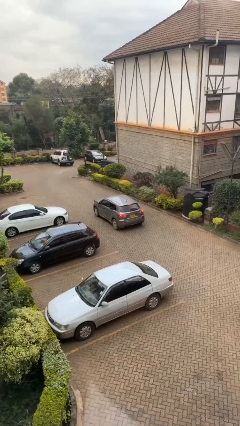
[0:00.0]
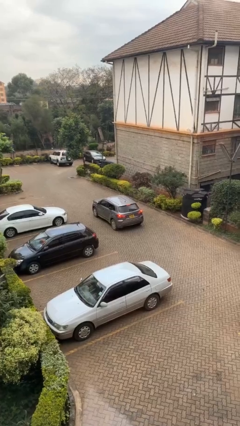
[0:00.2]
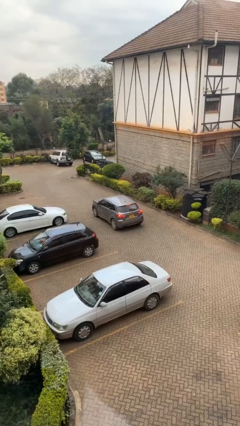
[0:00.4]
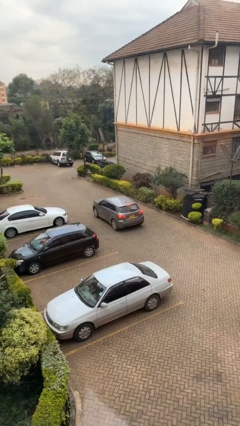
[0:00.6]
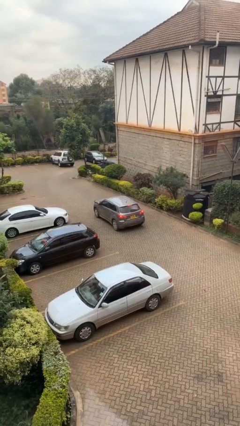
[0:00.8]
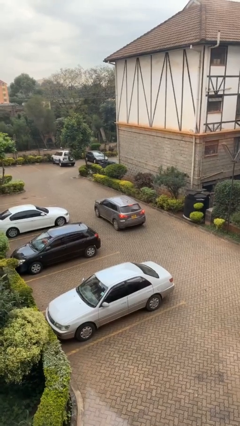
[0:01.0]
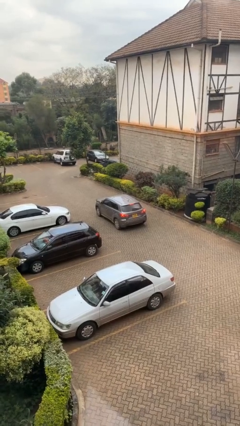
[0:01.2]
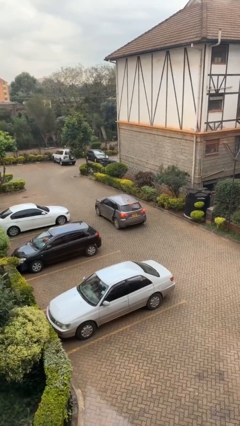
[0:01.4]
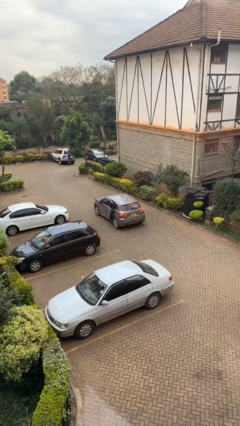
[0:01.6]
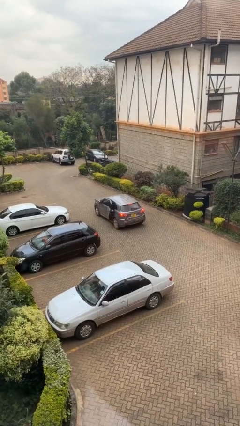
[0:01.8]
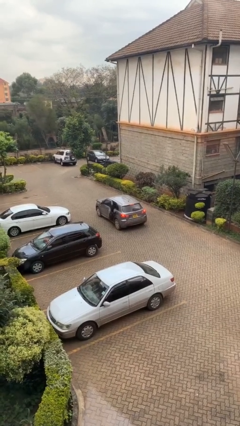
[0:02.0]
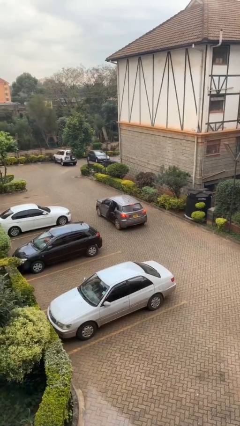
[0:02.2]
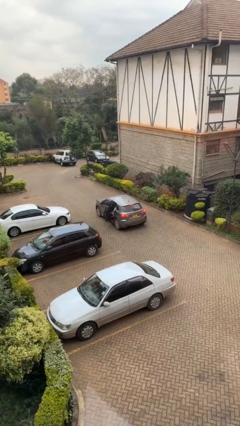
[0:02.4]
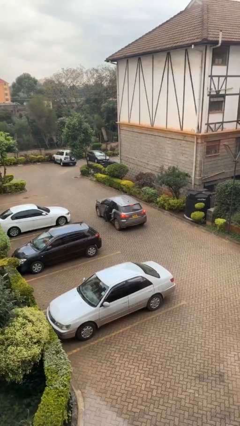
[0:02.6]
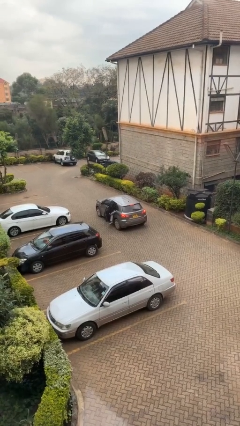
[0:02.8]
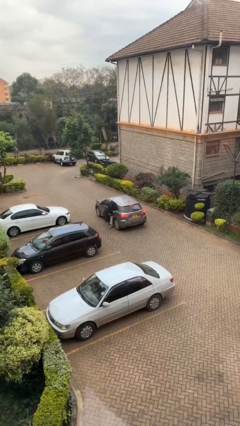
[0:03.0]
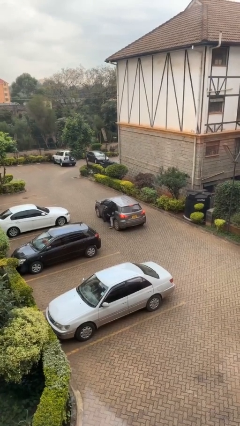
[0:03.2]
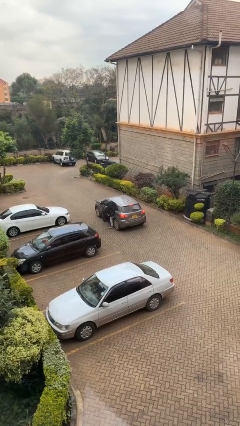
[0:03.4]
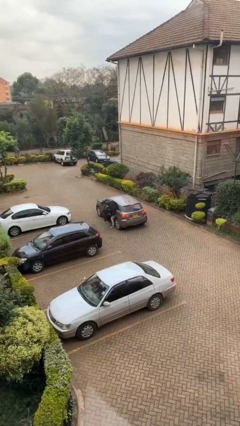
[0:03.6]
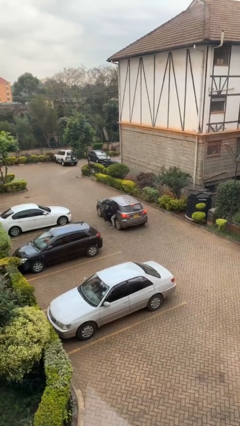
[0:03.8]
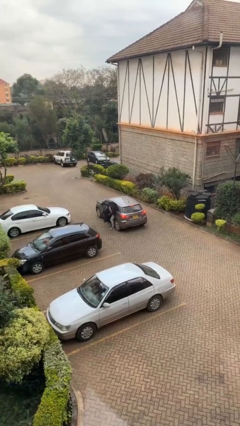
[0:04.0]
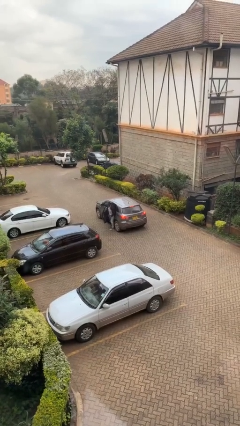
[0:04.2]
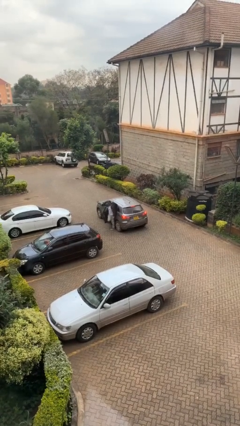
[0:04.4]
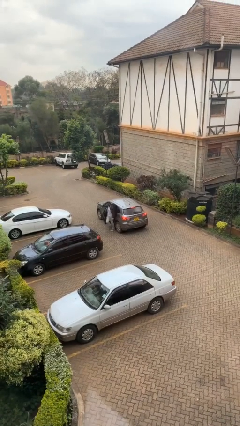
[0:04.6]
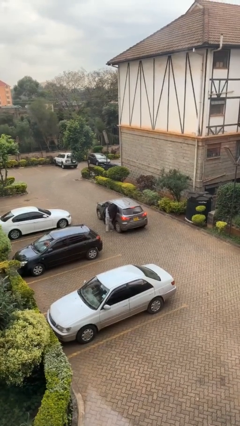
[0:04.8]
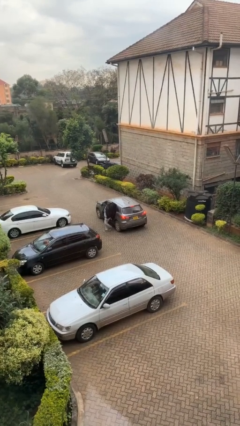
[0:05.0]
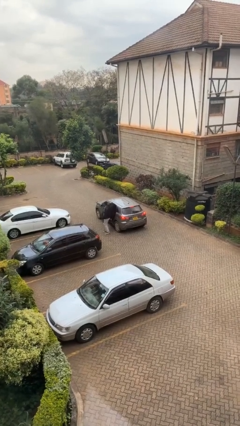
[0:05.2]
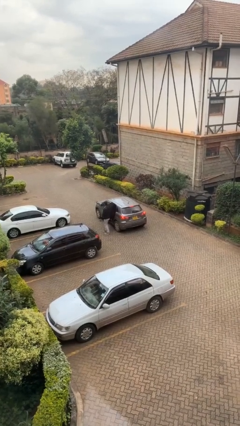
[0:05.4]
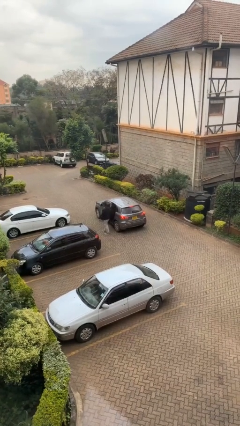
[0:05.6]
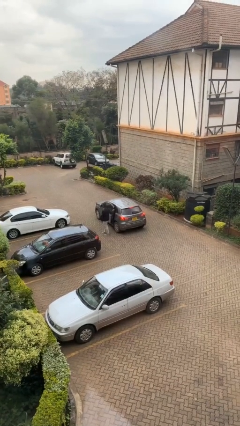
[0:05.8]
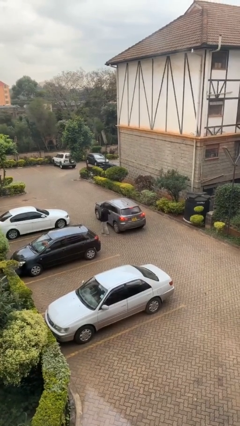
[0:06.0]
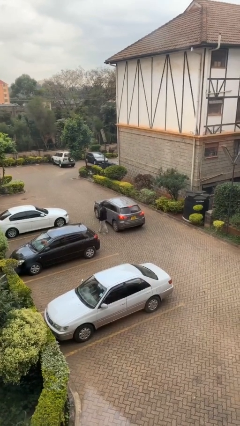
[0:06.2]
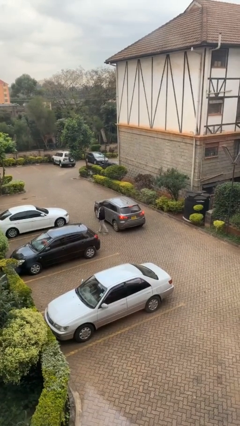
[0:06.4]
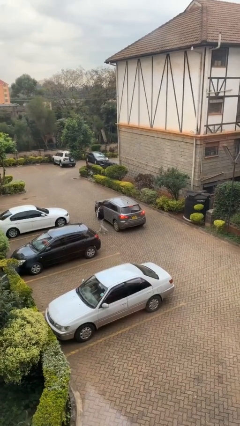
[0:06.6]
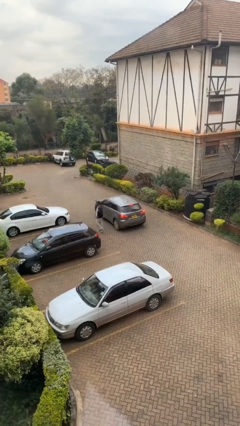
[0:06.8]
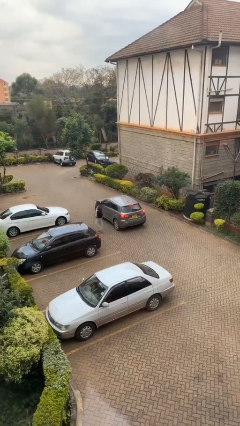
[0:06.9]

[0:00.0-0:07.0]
car drops off person

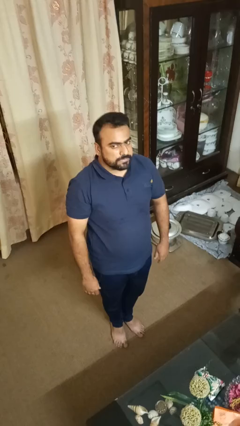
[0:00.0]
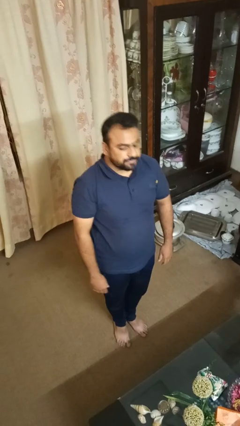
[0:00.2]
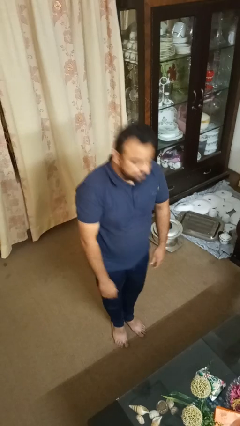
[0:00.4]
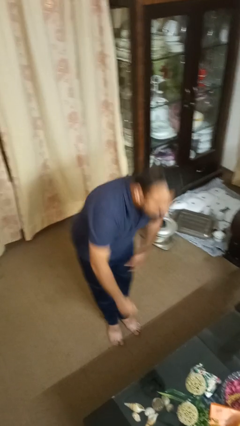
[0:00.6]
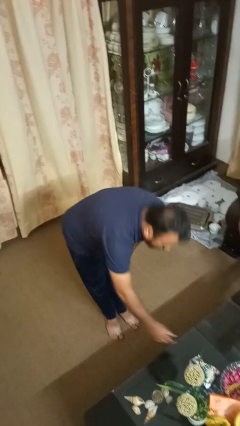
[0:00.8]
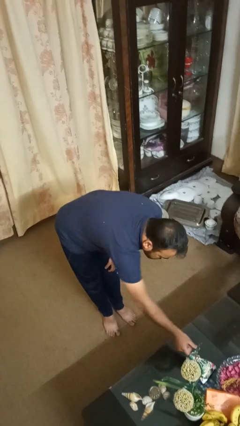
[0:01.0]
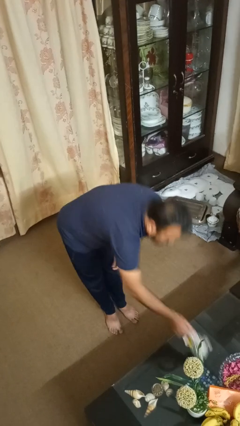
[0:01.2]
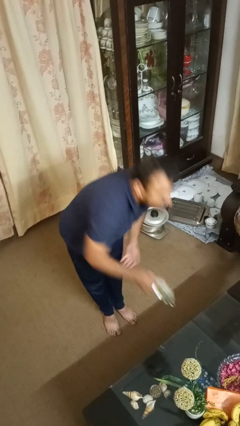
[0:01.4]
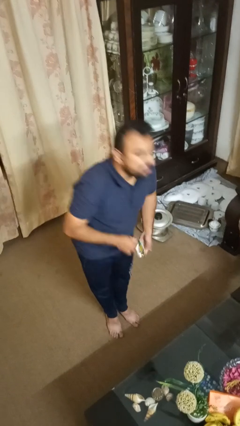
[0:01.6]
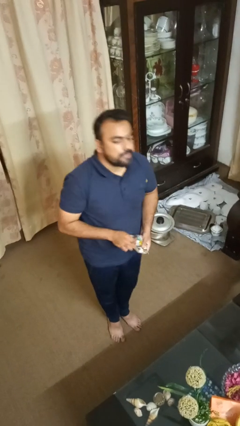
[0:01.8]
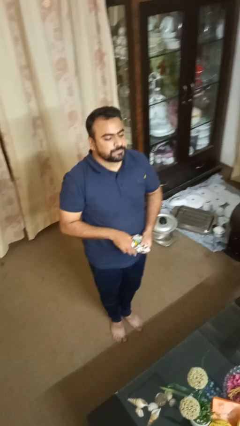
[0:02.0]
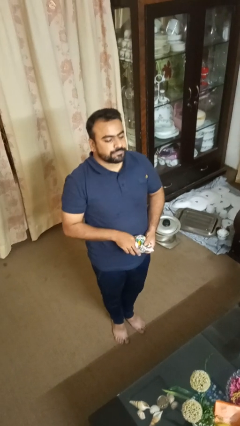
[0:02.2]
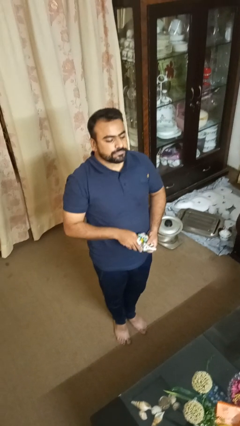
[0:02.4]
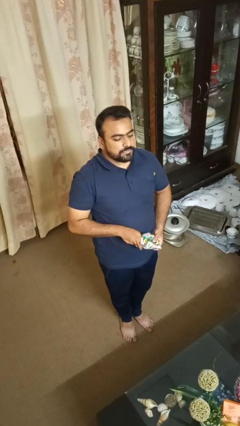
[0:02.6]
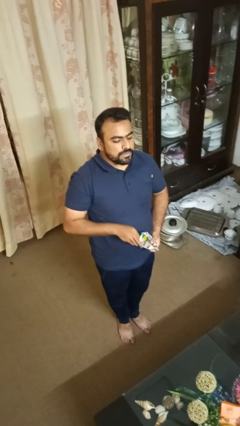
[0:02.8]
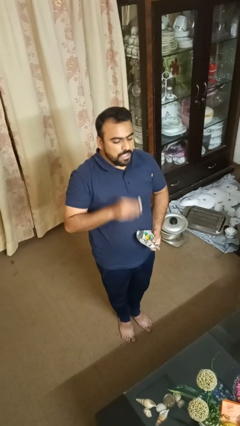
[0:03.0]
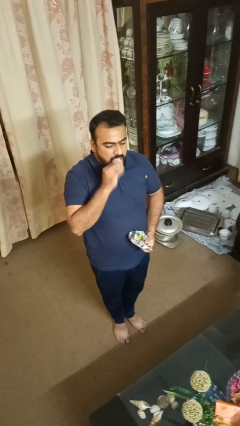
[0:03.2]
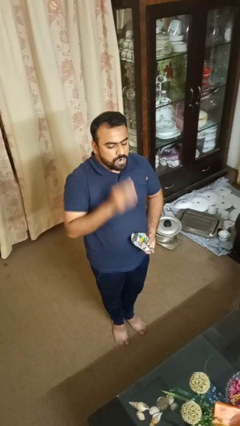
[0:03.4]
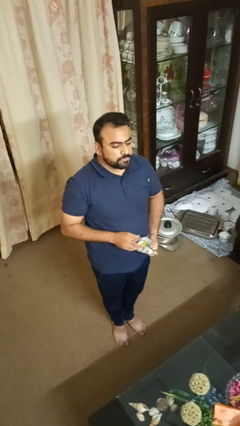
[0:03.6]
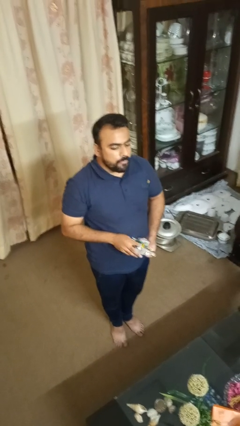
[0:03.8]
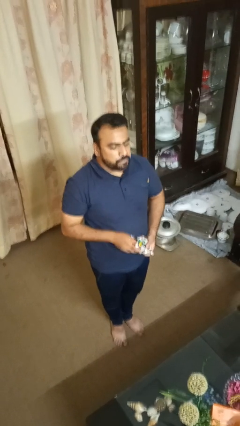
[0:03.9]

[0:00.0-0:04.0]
person eats snack from bag

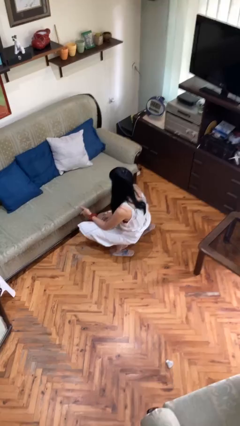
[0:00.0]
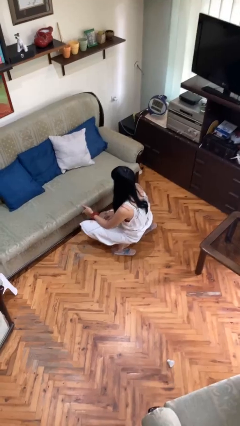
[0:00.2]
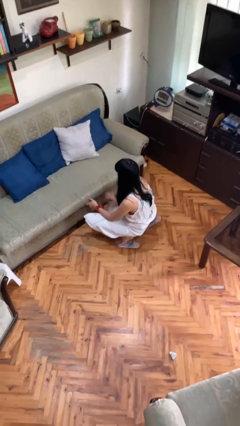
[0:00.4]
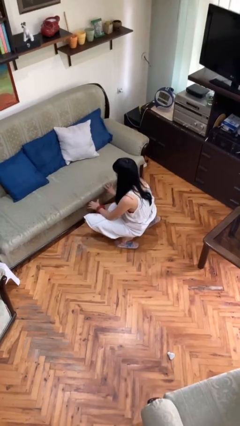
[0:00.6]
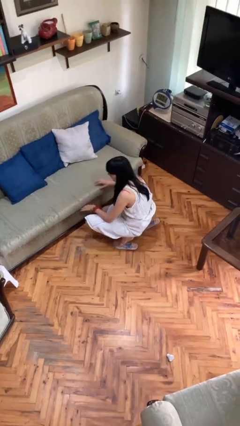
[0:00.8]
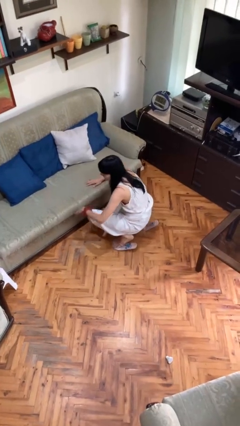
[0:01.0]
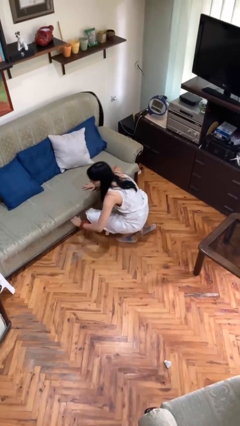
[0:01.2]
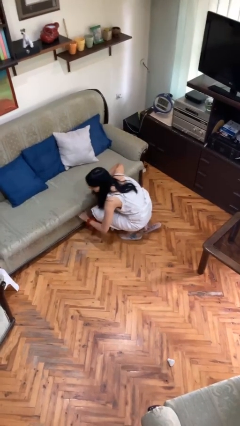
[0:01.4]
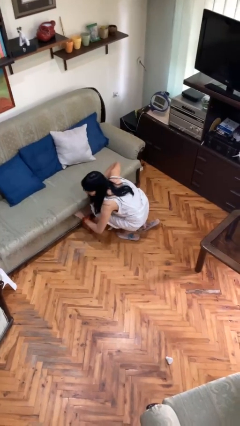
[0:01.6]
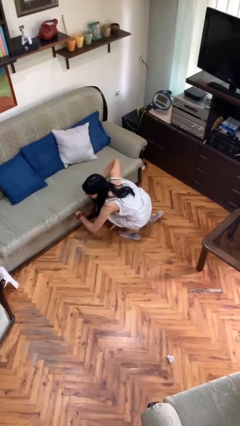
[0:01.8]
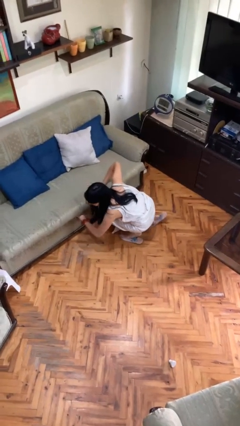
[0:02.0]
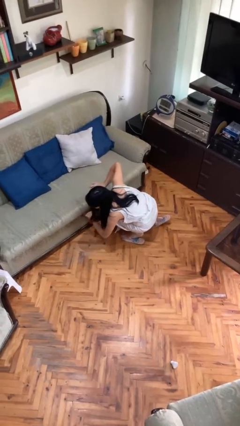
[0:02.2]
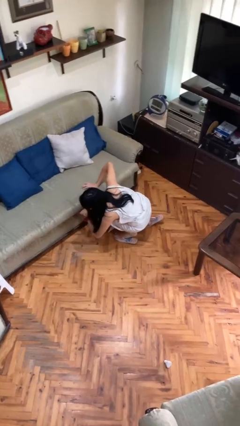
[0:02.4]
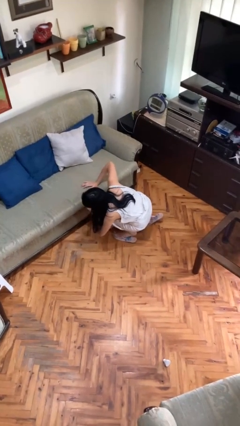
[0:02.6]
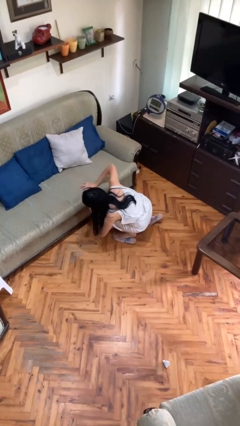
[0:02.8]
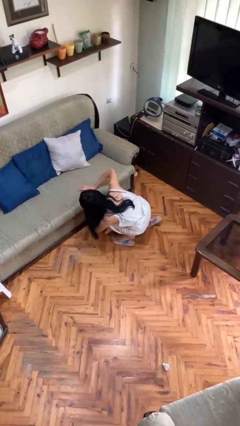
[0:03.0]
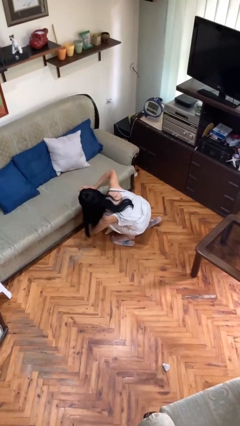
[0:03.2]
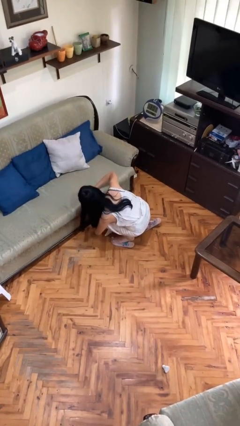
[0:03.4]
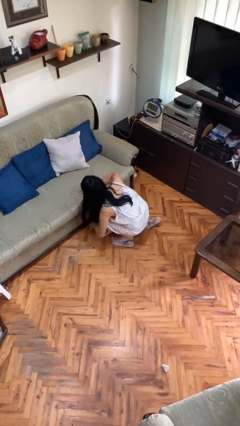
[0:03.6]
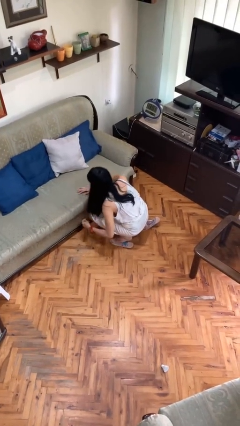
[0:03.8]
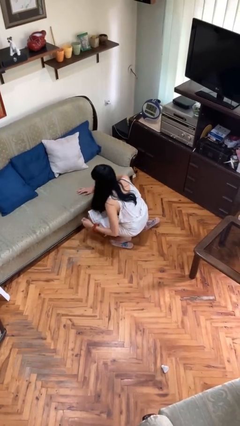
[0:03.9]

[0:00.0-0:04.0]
person searches under couch

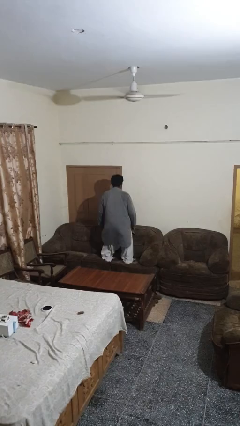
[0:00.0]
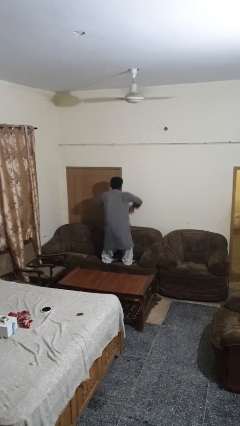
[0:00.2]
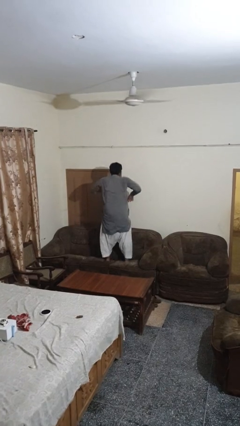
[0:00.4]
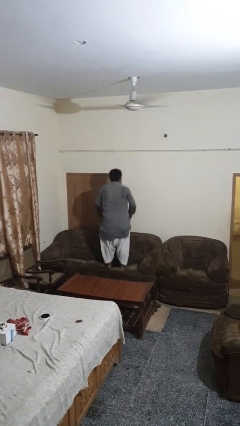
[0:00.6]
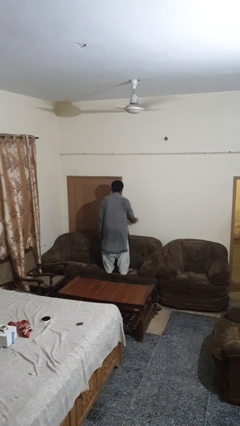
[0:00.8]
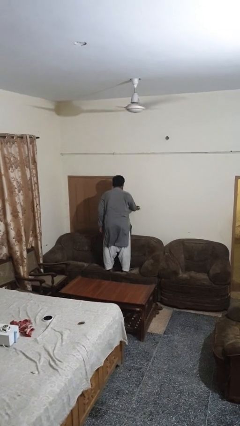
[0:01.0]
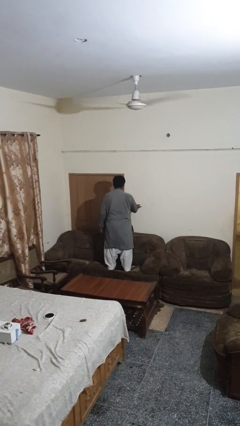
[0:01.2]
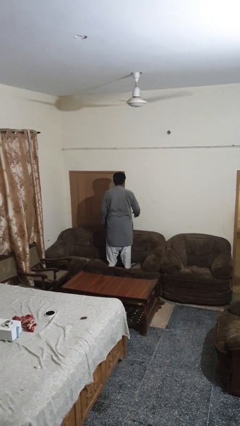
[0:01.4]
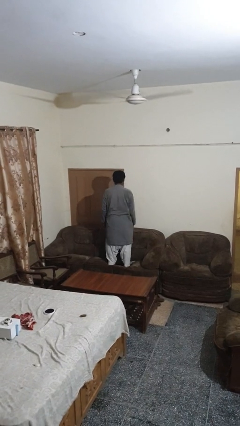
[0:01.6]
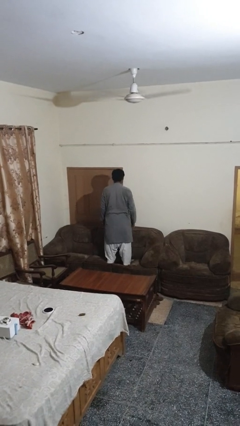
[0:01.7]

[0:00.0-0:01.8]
person jumps on couch

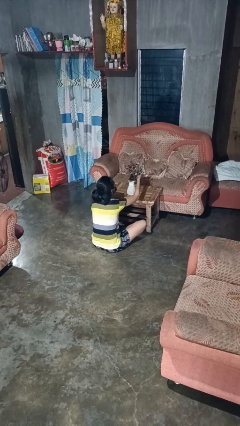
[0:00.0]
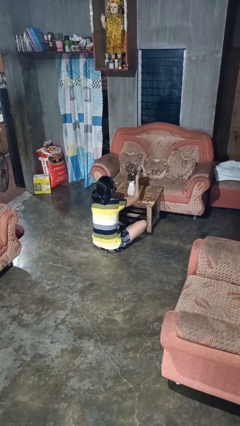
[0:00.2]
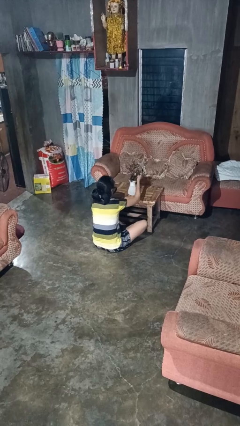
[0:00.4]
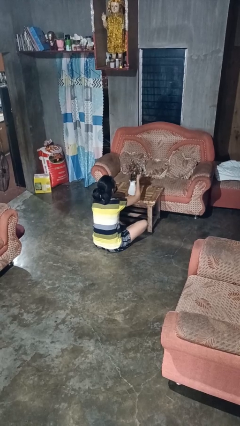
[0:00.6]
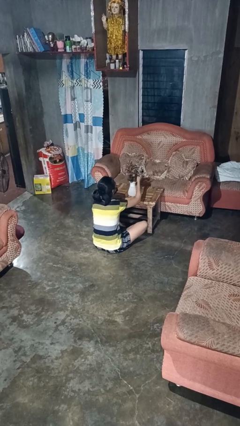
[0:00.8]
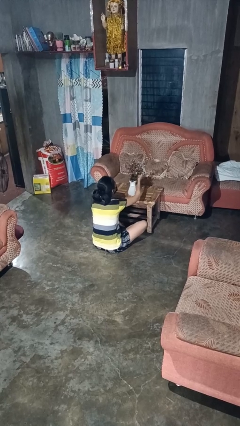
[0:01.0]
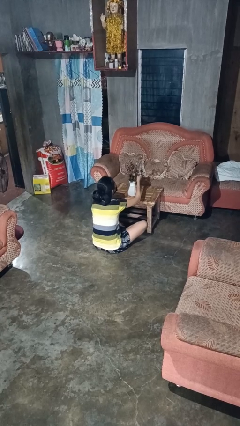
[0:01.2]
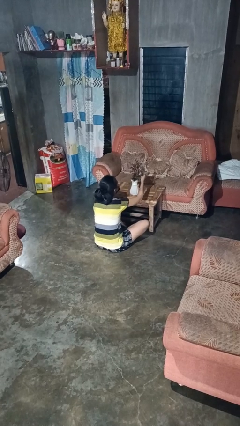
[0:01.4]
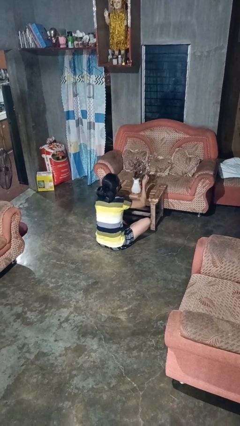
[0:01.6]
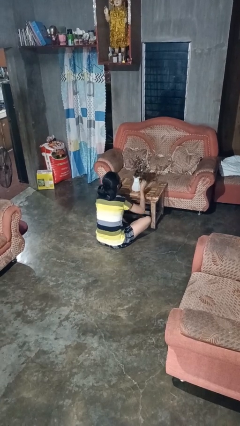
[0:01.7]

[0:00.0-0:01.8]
person arranges flowers in vase
